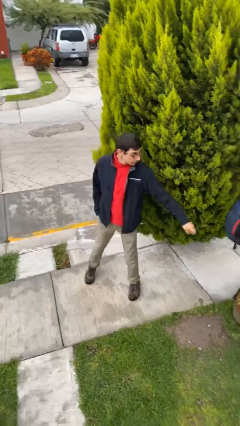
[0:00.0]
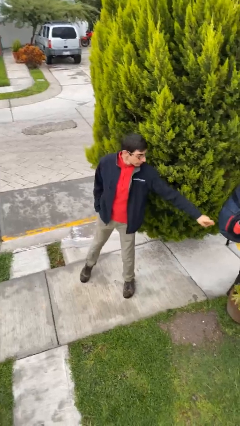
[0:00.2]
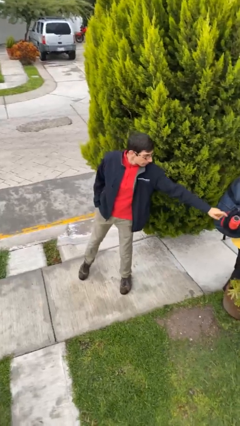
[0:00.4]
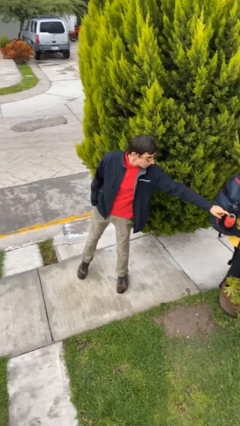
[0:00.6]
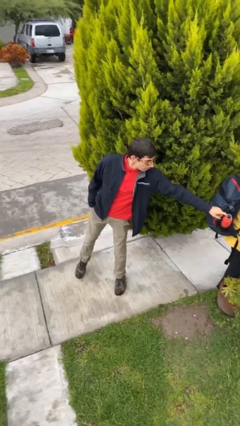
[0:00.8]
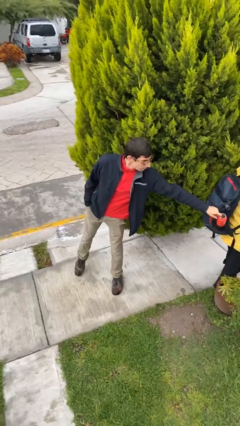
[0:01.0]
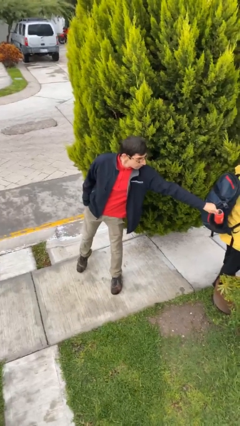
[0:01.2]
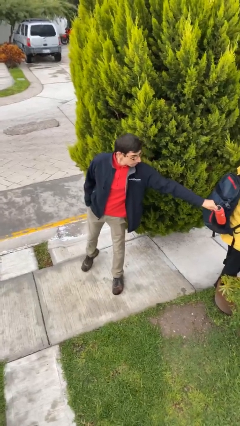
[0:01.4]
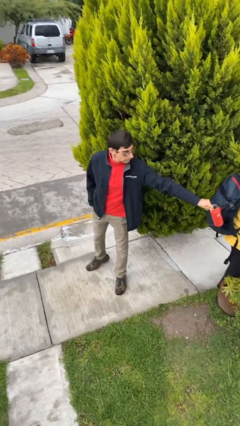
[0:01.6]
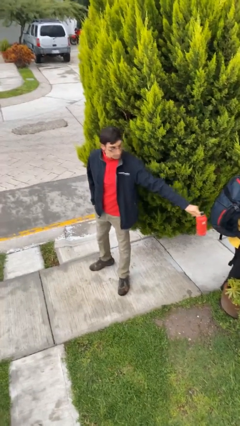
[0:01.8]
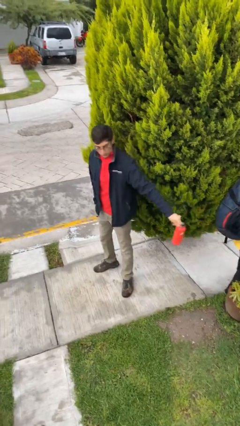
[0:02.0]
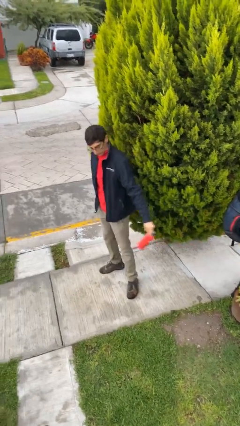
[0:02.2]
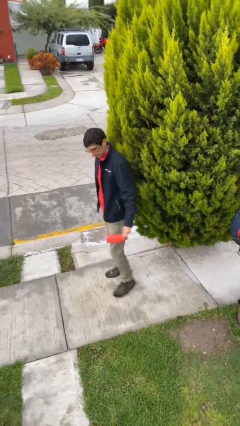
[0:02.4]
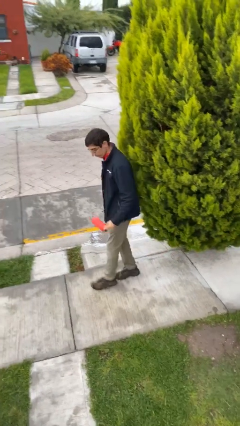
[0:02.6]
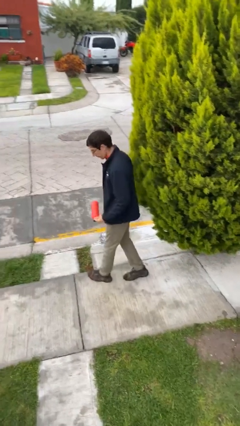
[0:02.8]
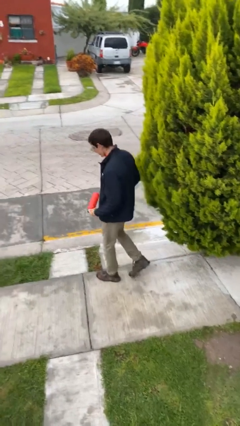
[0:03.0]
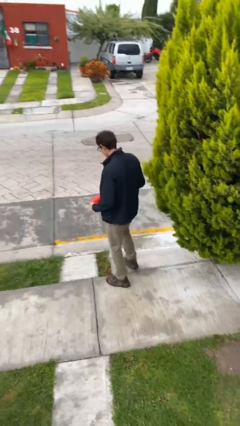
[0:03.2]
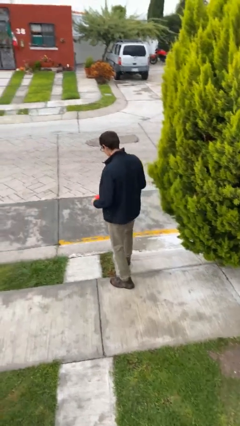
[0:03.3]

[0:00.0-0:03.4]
person steals object from person

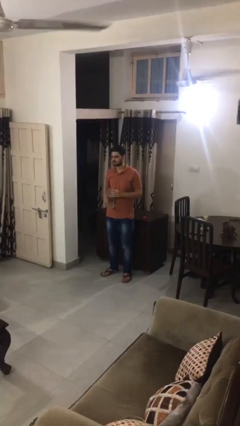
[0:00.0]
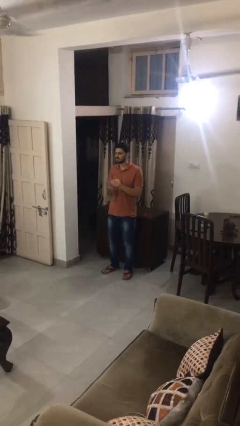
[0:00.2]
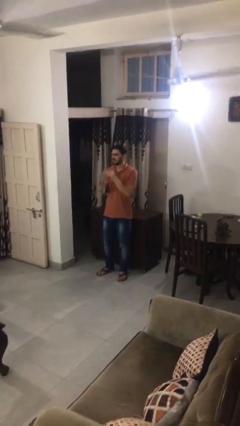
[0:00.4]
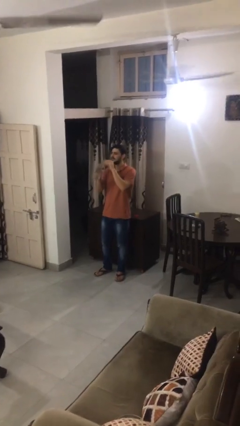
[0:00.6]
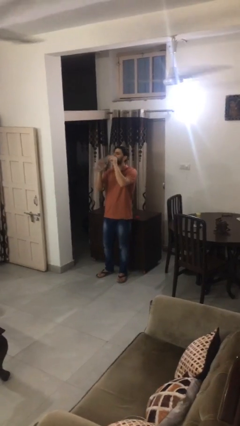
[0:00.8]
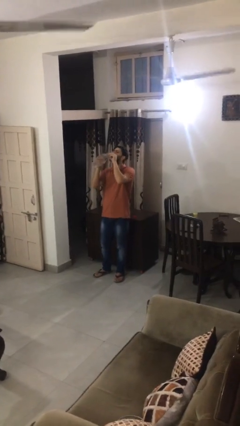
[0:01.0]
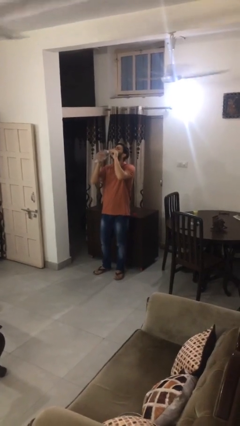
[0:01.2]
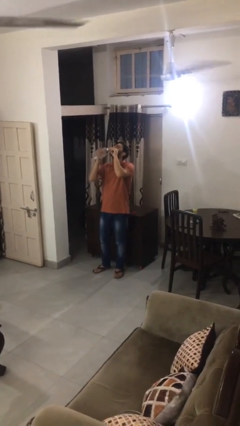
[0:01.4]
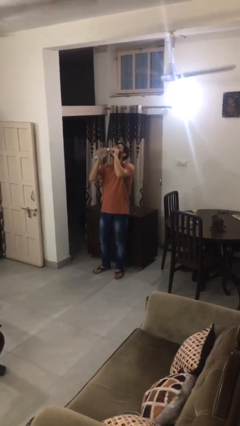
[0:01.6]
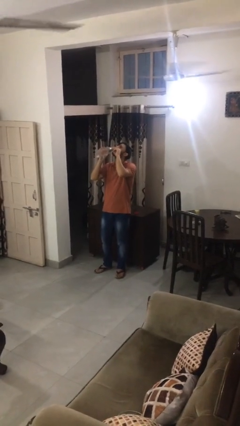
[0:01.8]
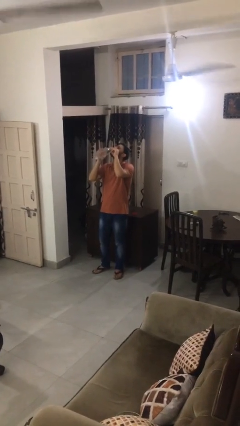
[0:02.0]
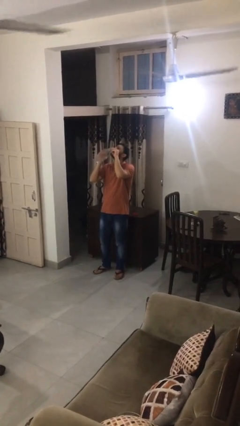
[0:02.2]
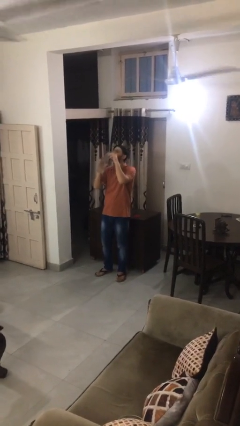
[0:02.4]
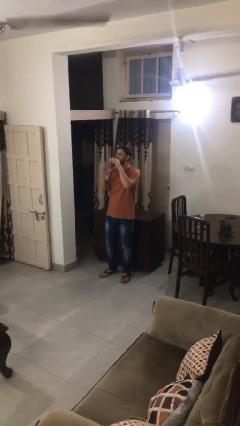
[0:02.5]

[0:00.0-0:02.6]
person drinks from bottle

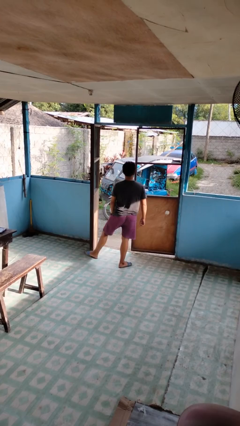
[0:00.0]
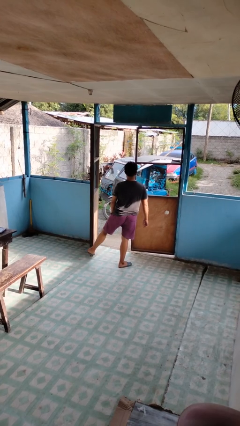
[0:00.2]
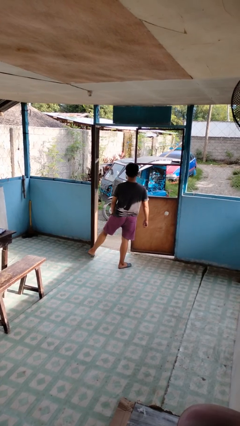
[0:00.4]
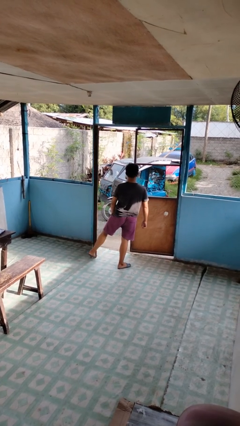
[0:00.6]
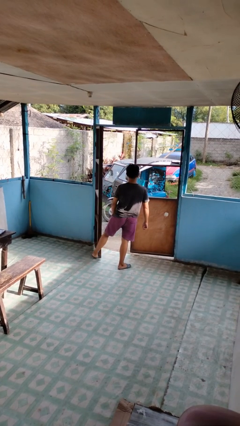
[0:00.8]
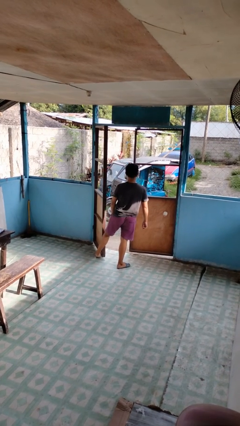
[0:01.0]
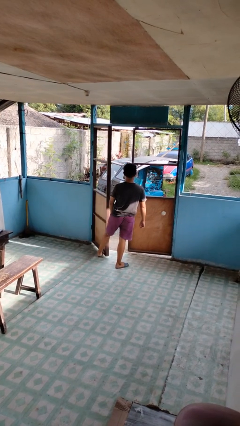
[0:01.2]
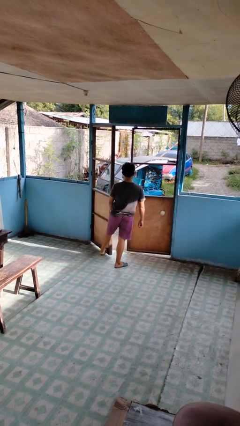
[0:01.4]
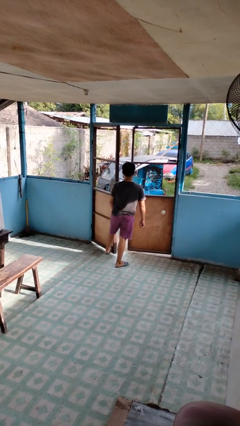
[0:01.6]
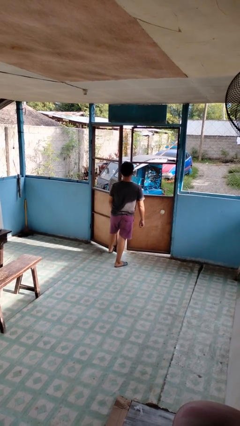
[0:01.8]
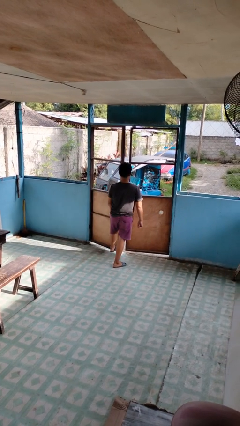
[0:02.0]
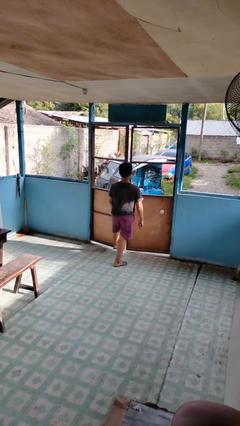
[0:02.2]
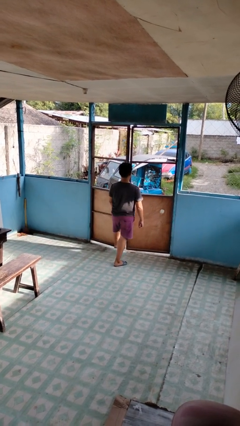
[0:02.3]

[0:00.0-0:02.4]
person closes door with foot

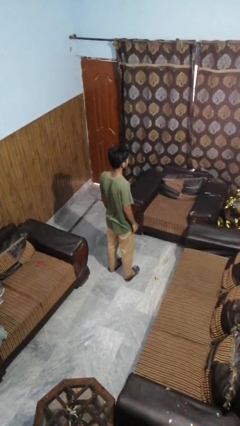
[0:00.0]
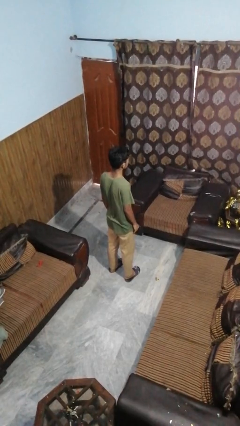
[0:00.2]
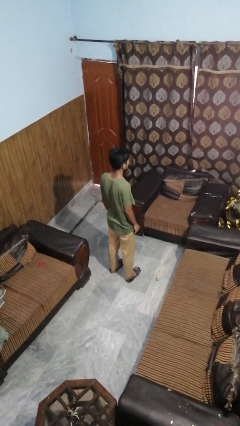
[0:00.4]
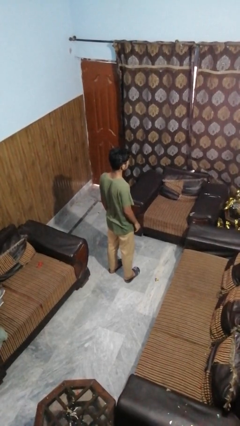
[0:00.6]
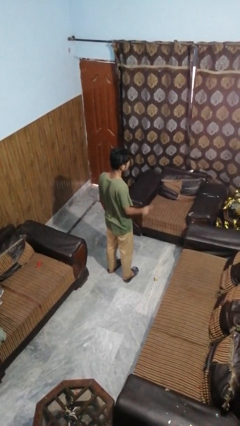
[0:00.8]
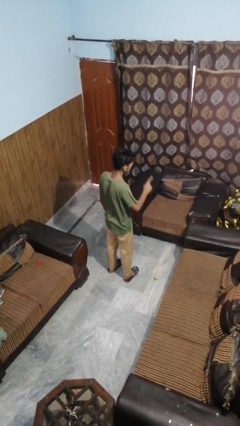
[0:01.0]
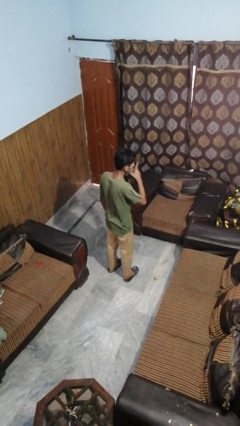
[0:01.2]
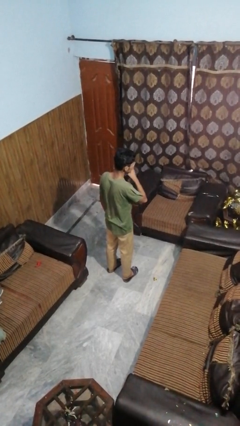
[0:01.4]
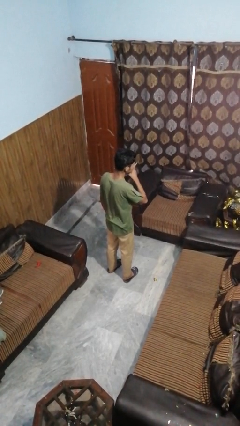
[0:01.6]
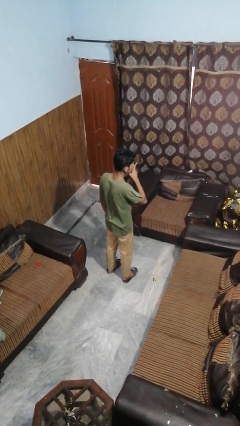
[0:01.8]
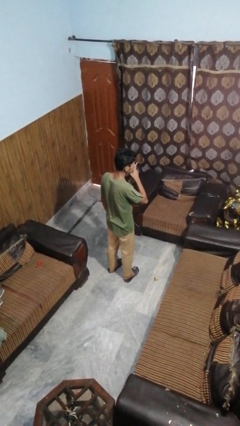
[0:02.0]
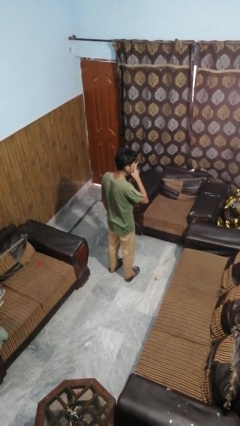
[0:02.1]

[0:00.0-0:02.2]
person gestures be quiet

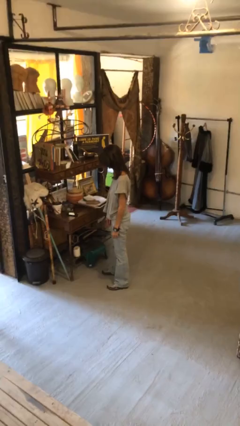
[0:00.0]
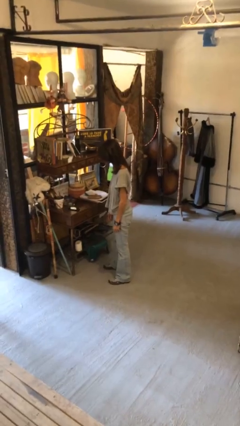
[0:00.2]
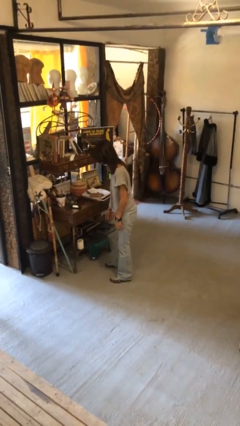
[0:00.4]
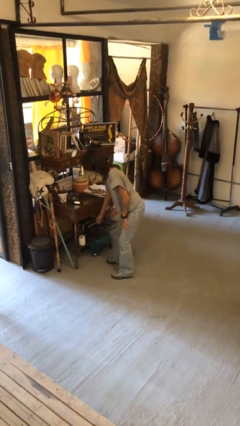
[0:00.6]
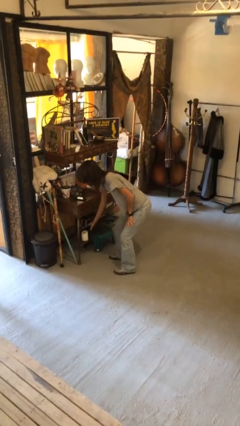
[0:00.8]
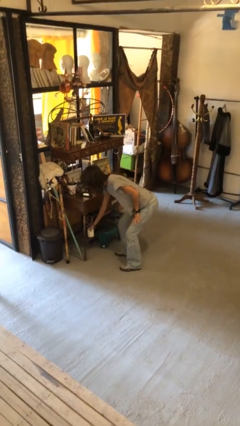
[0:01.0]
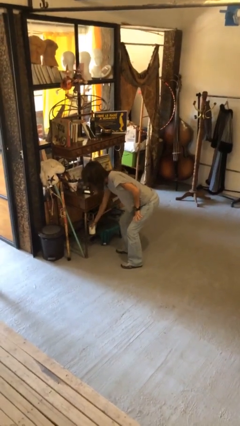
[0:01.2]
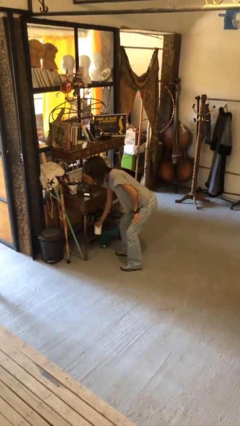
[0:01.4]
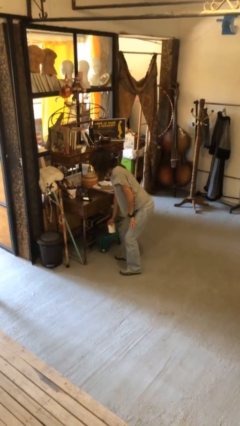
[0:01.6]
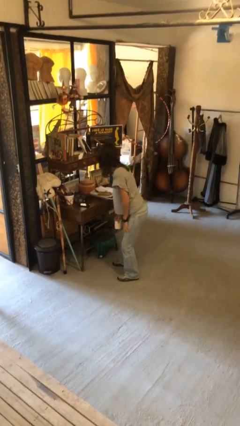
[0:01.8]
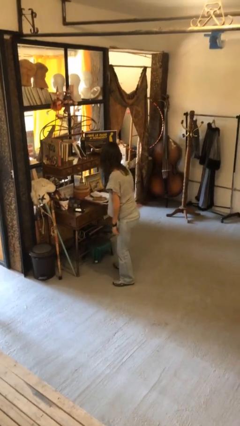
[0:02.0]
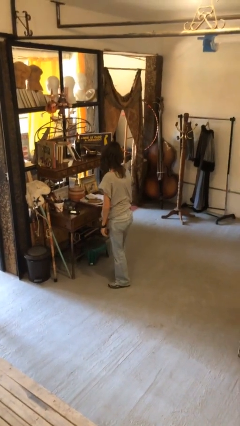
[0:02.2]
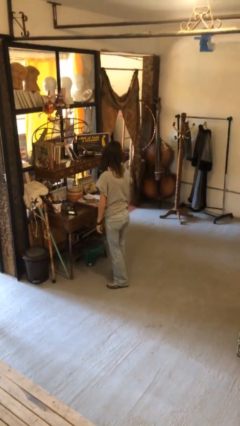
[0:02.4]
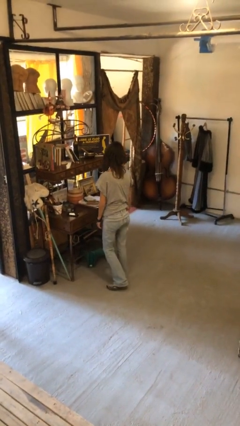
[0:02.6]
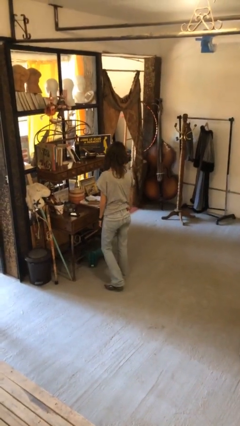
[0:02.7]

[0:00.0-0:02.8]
person picks up object from cabinet

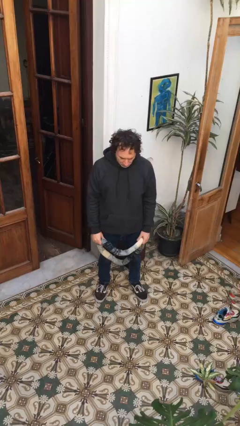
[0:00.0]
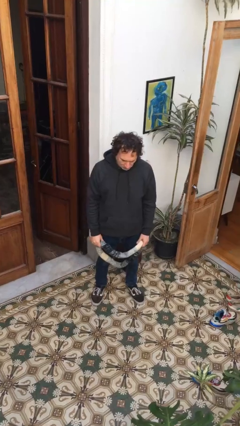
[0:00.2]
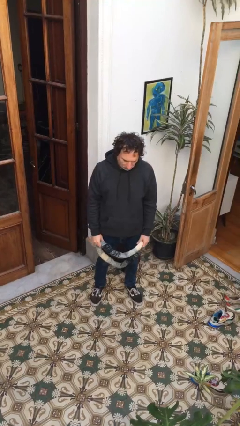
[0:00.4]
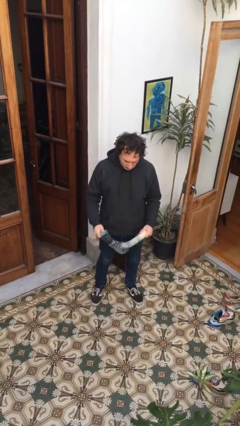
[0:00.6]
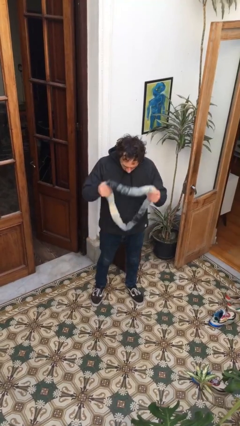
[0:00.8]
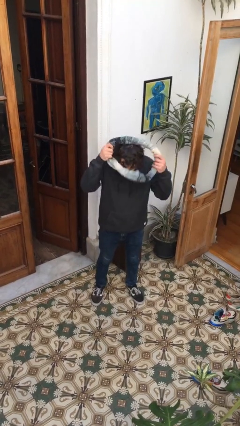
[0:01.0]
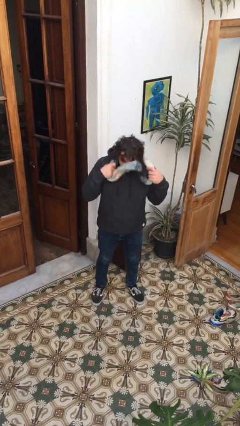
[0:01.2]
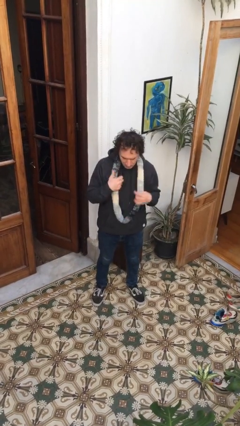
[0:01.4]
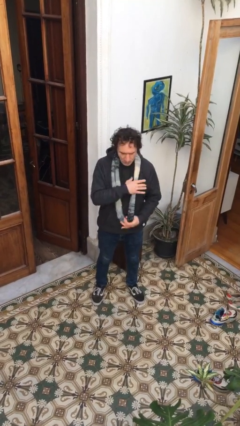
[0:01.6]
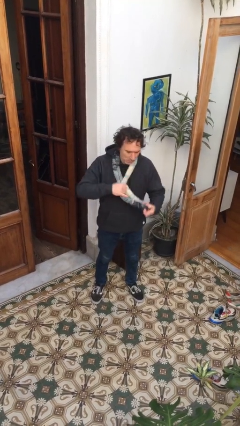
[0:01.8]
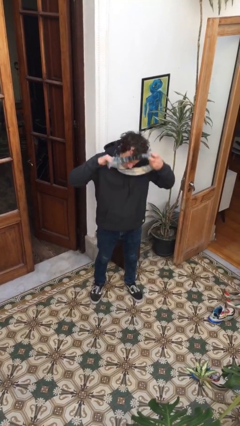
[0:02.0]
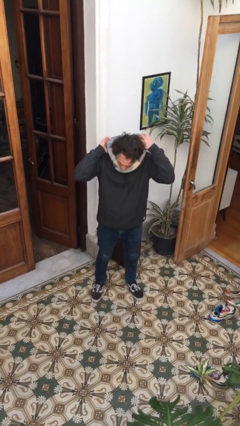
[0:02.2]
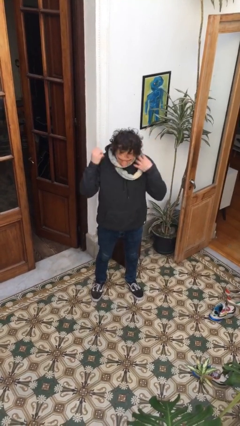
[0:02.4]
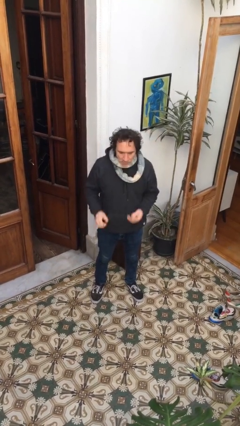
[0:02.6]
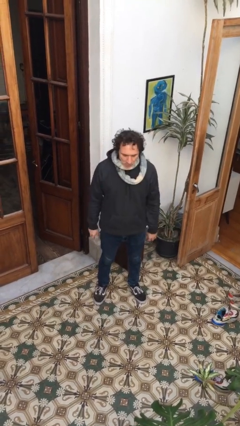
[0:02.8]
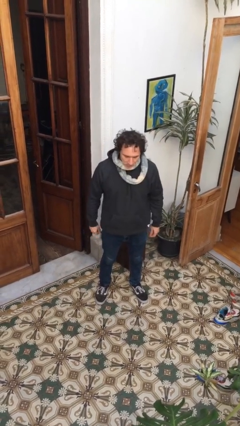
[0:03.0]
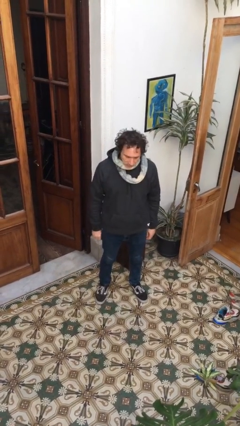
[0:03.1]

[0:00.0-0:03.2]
person puts on scarf

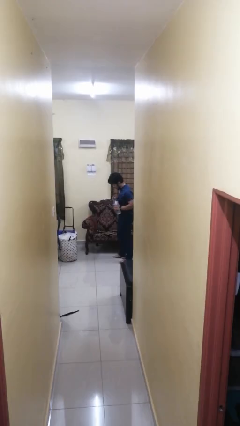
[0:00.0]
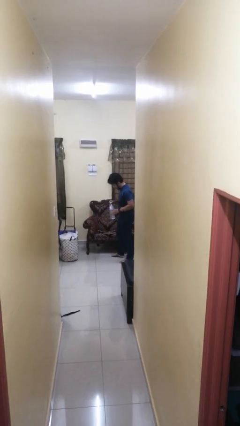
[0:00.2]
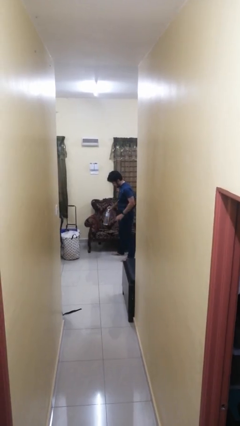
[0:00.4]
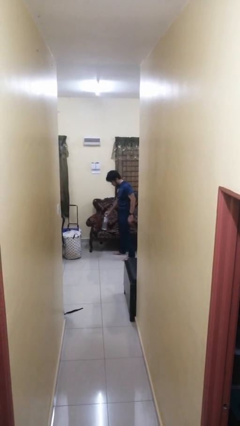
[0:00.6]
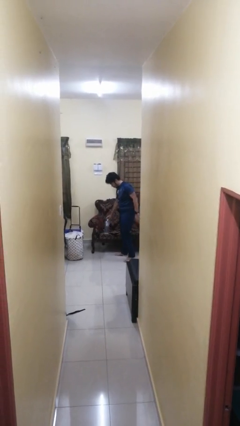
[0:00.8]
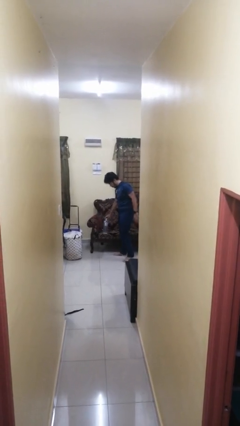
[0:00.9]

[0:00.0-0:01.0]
person puts down object on couch
